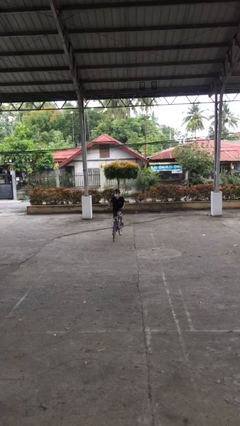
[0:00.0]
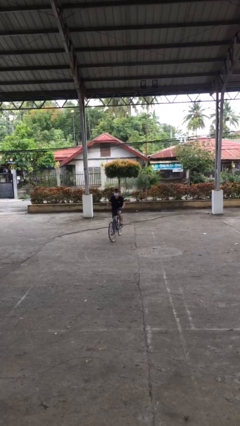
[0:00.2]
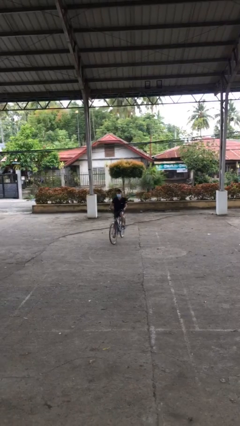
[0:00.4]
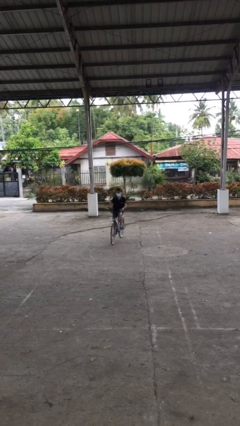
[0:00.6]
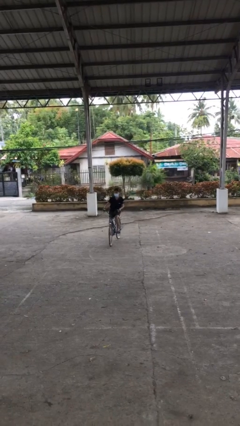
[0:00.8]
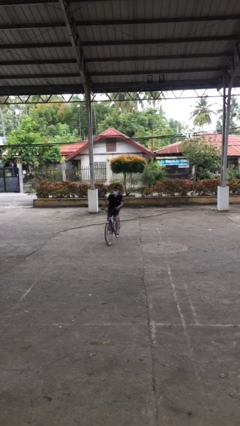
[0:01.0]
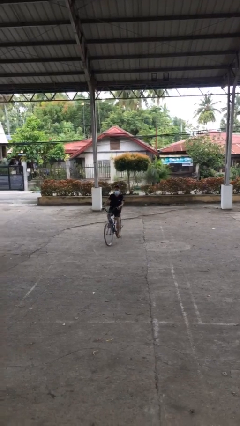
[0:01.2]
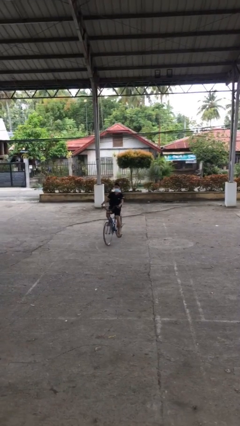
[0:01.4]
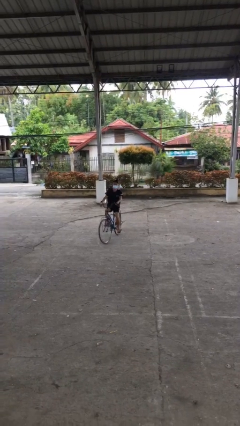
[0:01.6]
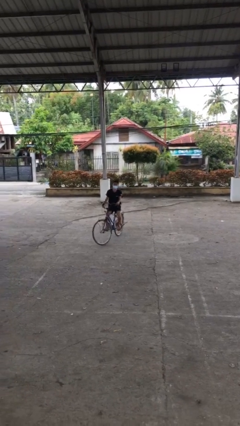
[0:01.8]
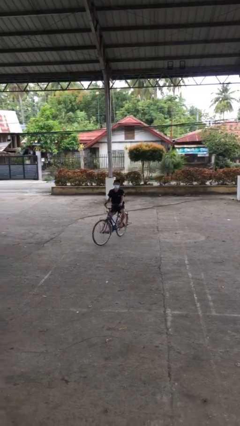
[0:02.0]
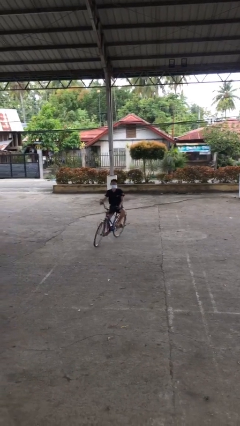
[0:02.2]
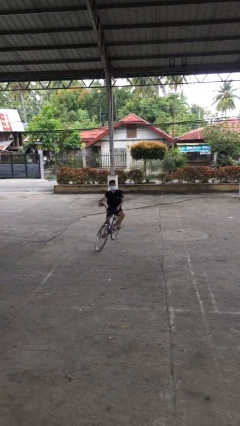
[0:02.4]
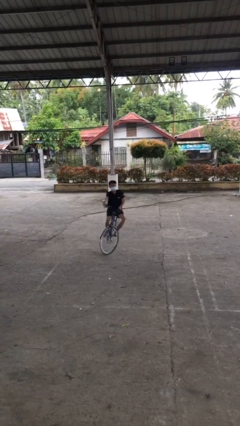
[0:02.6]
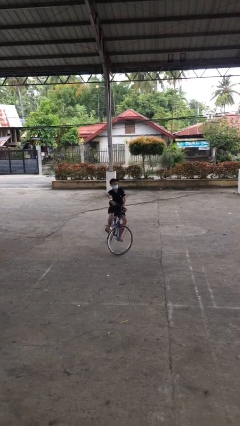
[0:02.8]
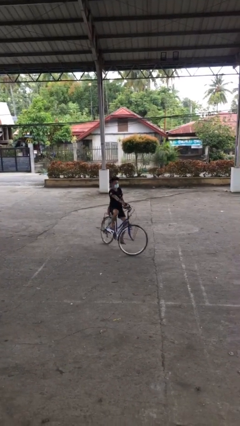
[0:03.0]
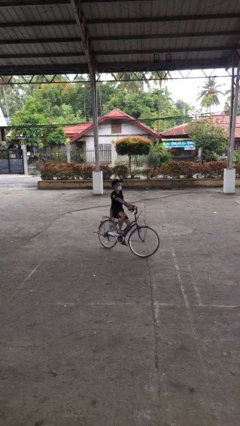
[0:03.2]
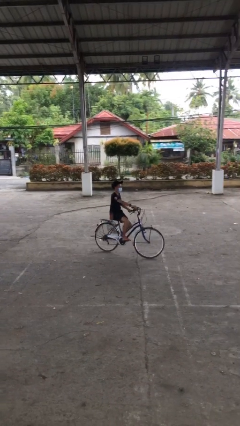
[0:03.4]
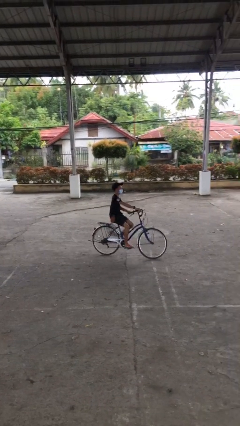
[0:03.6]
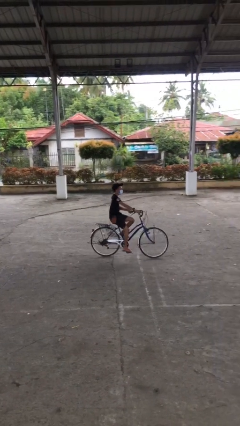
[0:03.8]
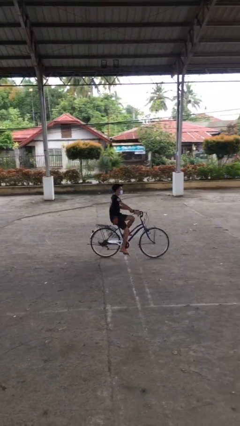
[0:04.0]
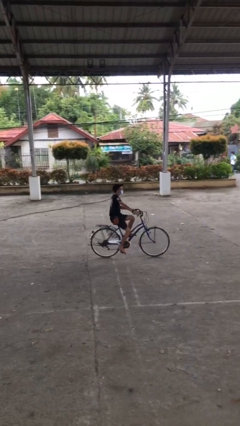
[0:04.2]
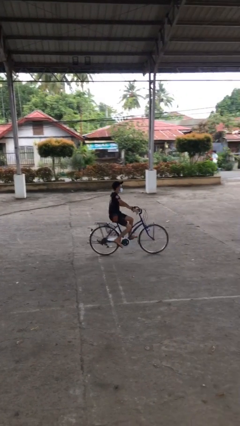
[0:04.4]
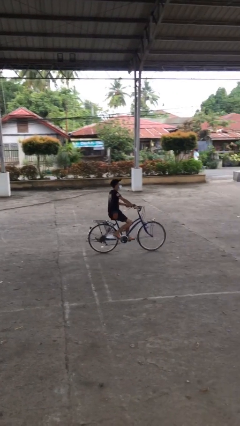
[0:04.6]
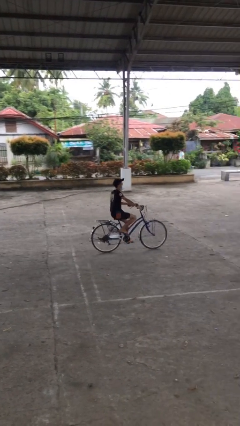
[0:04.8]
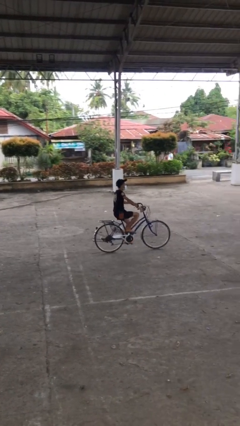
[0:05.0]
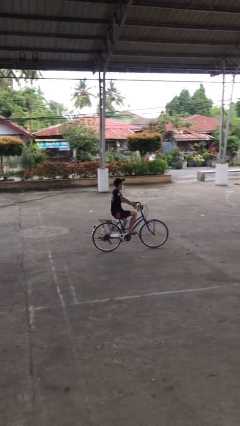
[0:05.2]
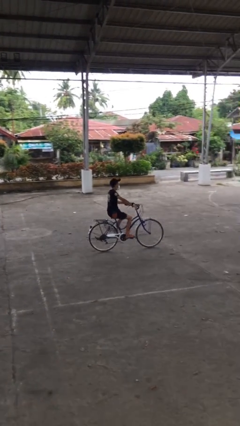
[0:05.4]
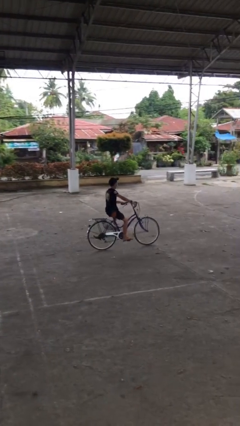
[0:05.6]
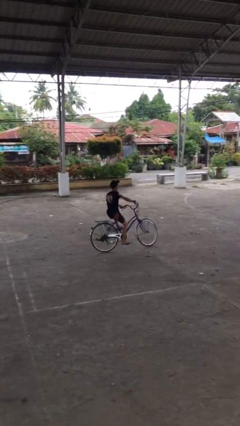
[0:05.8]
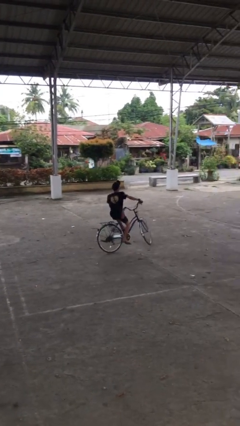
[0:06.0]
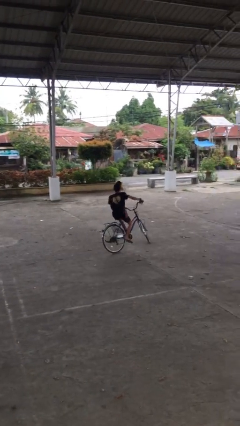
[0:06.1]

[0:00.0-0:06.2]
person rides bicycle

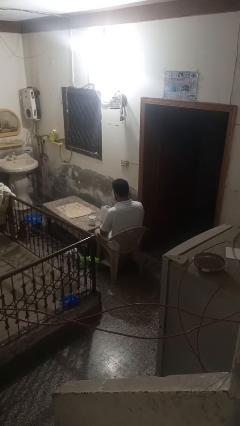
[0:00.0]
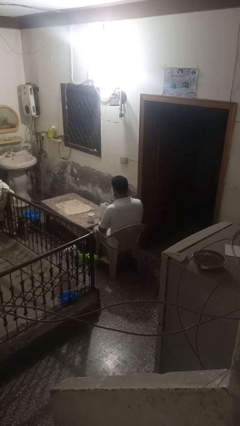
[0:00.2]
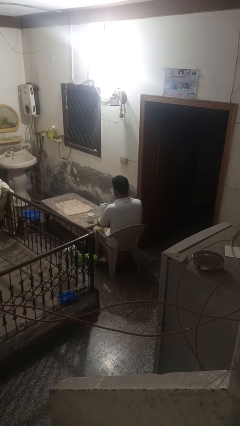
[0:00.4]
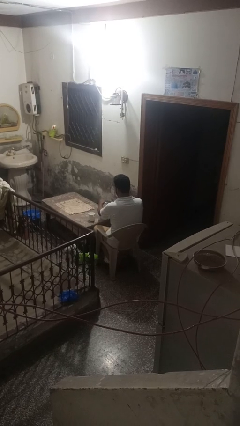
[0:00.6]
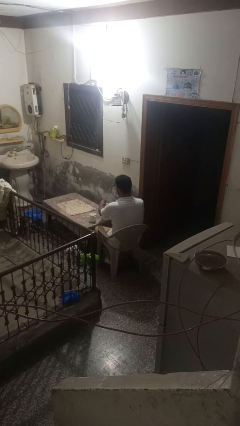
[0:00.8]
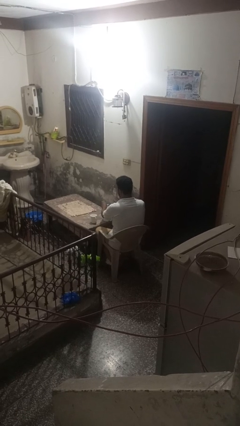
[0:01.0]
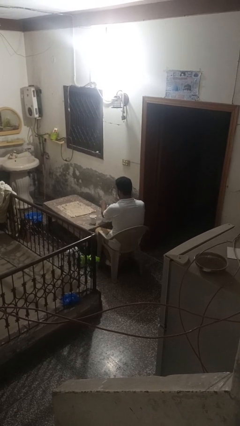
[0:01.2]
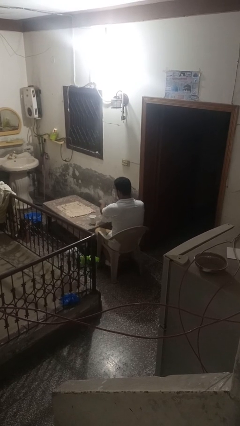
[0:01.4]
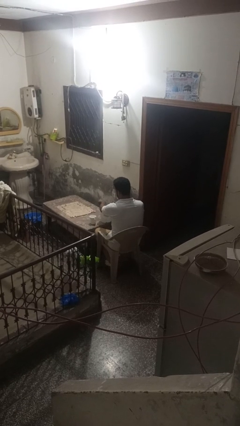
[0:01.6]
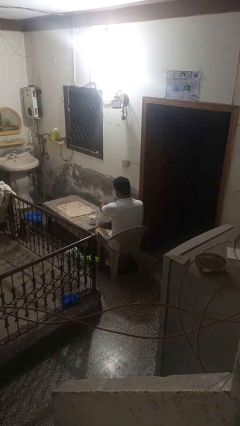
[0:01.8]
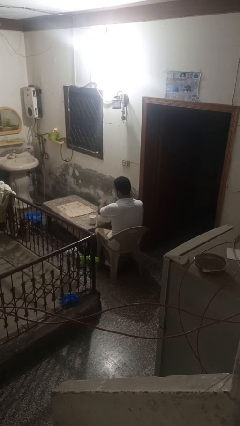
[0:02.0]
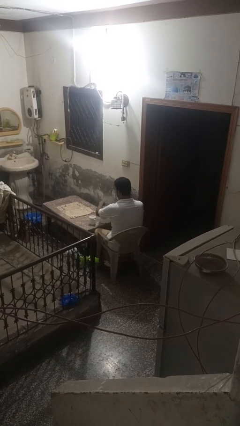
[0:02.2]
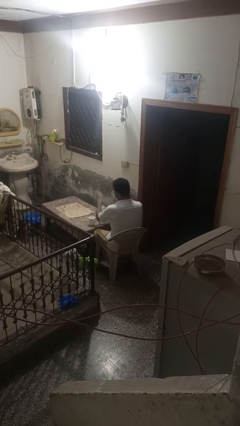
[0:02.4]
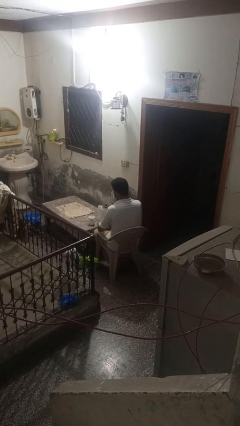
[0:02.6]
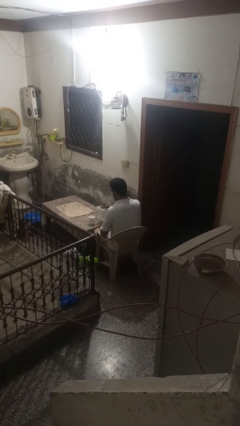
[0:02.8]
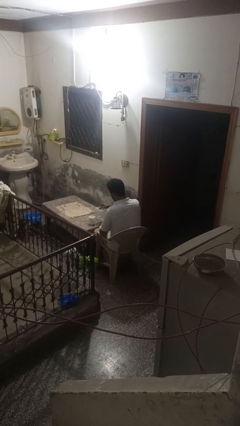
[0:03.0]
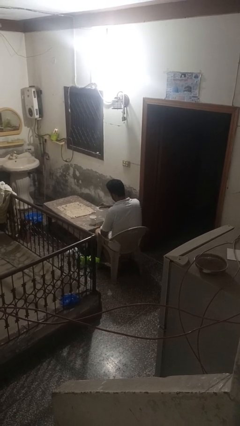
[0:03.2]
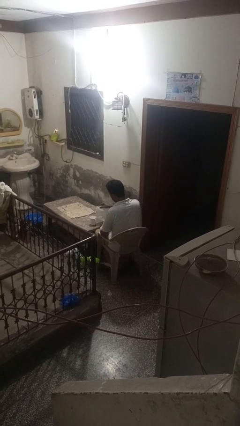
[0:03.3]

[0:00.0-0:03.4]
person unscrews lid from bottle

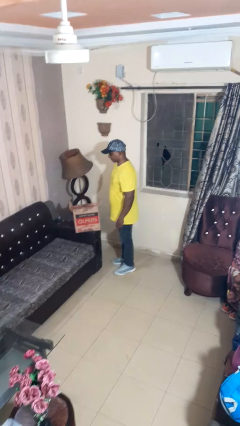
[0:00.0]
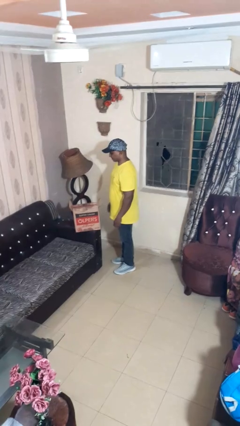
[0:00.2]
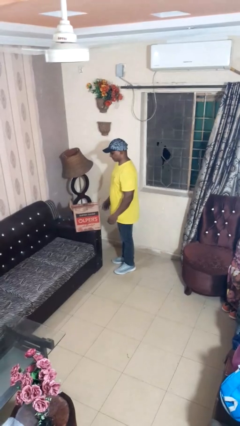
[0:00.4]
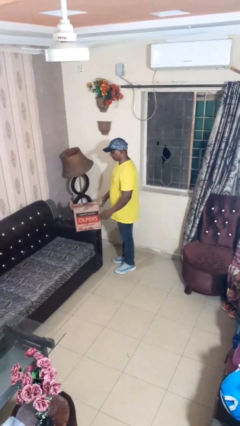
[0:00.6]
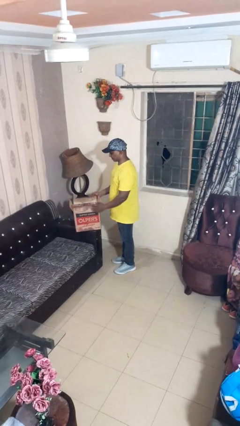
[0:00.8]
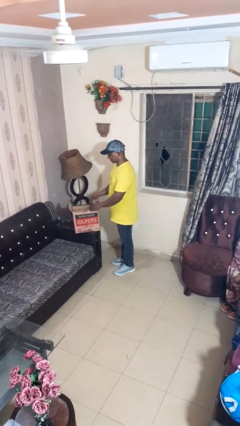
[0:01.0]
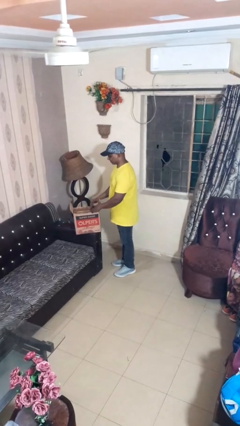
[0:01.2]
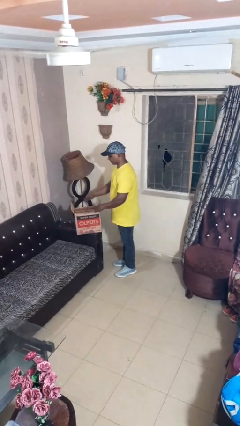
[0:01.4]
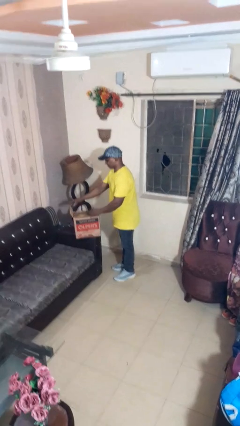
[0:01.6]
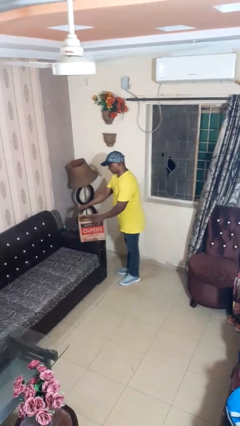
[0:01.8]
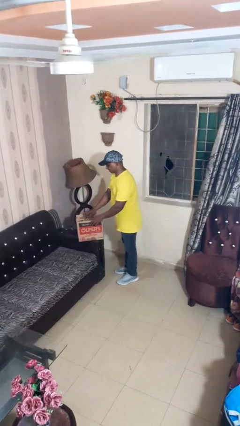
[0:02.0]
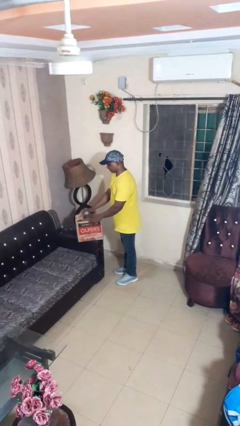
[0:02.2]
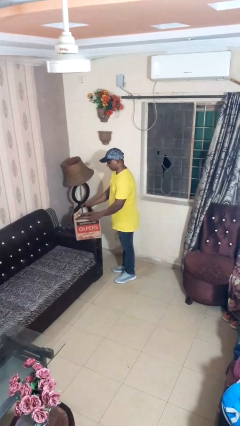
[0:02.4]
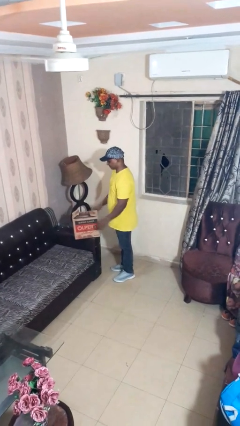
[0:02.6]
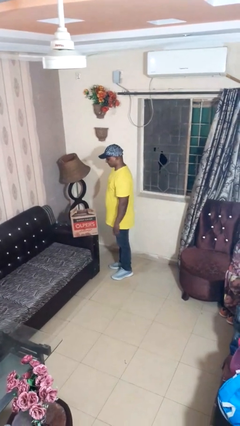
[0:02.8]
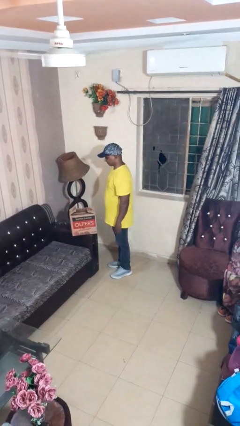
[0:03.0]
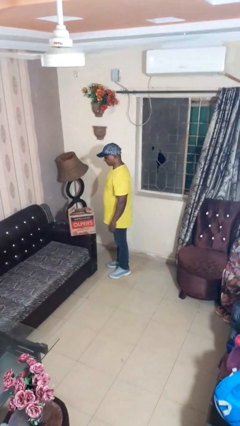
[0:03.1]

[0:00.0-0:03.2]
person closes box

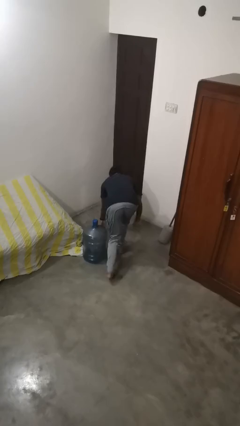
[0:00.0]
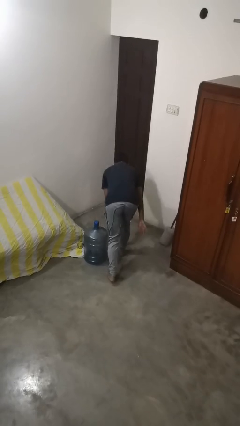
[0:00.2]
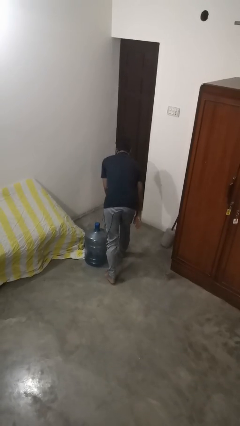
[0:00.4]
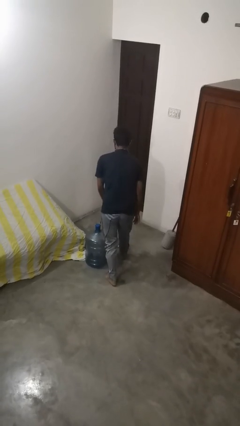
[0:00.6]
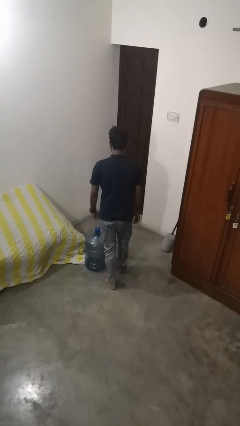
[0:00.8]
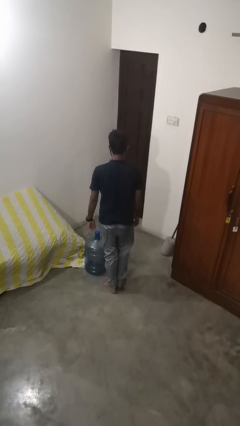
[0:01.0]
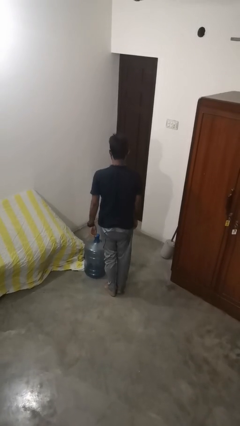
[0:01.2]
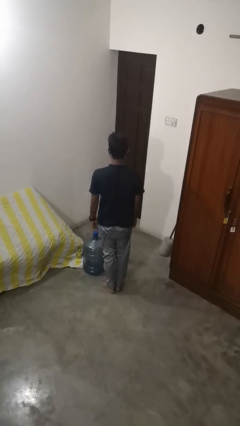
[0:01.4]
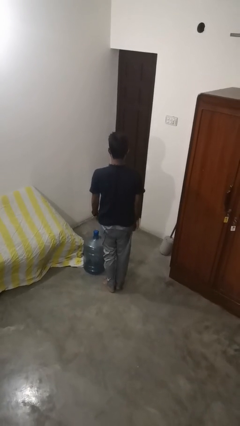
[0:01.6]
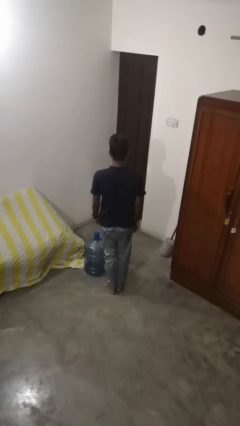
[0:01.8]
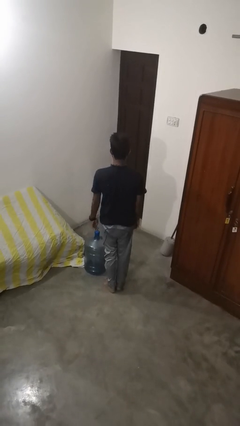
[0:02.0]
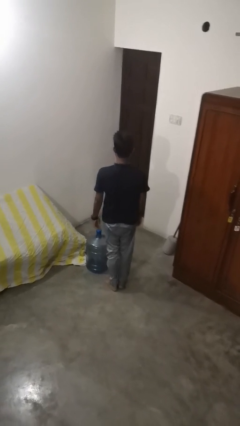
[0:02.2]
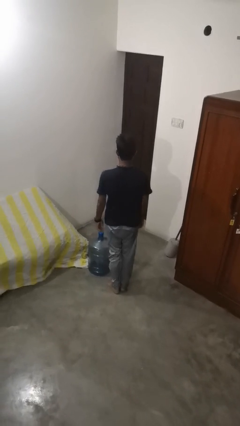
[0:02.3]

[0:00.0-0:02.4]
person stands up from floor

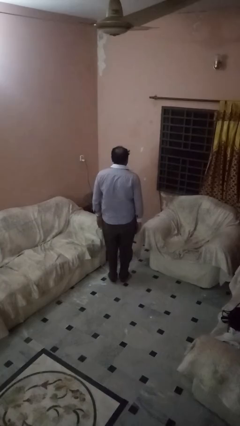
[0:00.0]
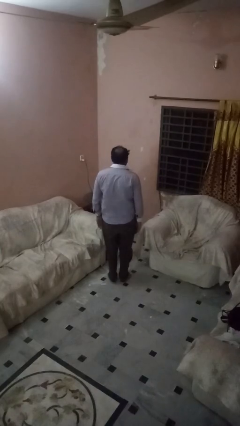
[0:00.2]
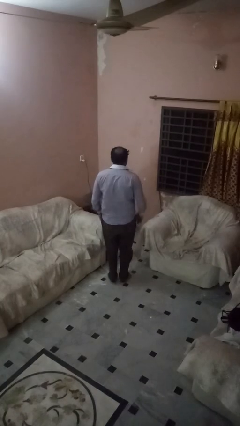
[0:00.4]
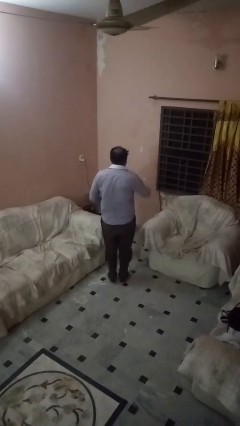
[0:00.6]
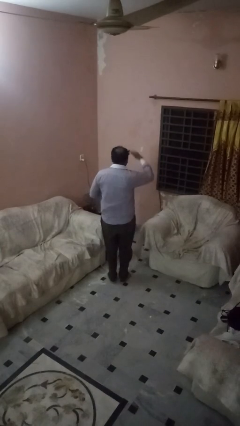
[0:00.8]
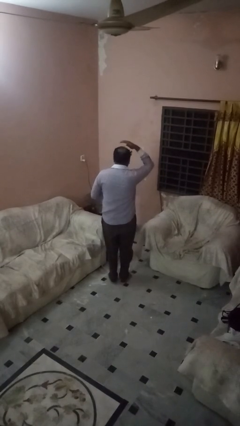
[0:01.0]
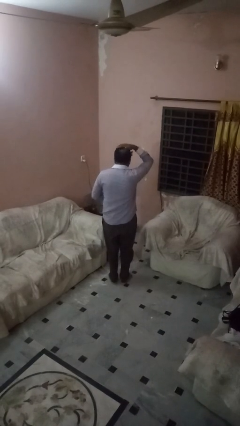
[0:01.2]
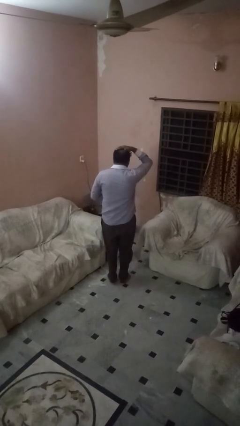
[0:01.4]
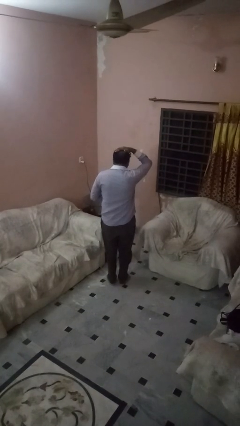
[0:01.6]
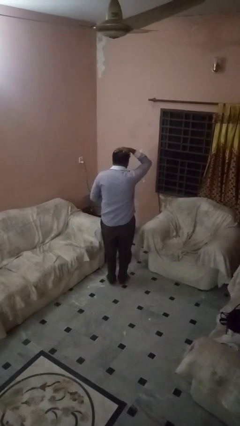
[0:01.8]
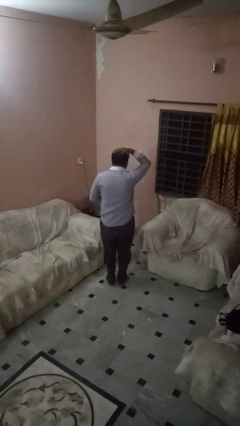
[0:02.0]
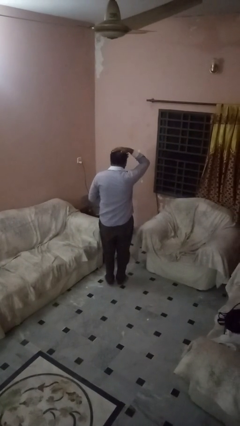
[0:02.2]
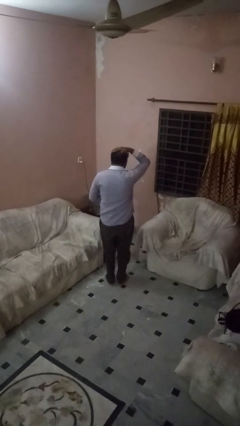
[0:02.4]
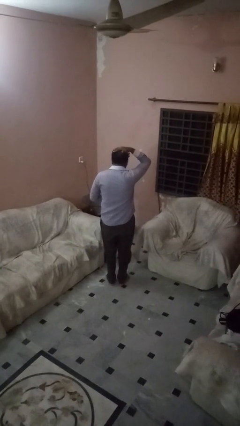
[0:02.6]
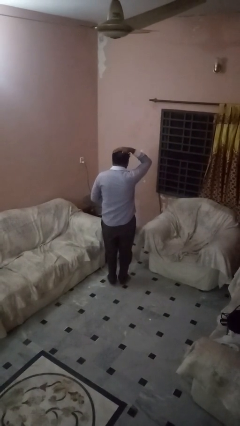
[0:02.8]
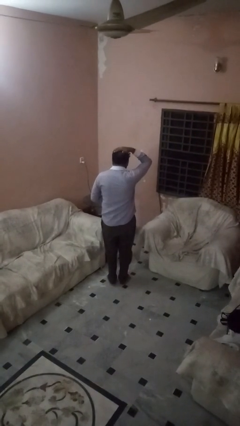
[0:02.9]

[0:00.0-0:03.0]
person pats head
